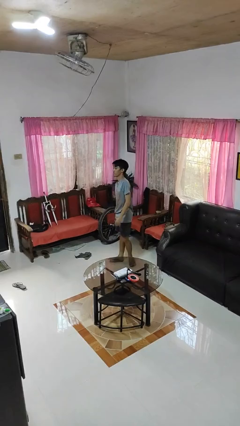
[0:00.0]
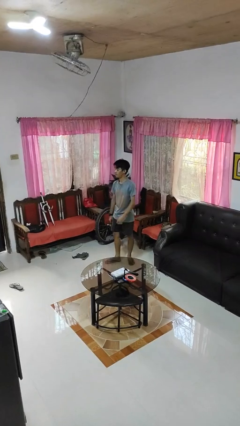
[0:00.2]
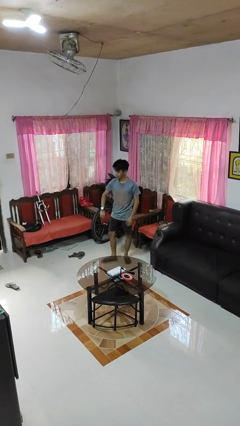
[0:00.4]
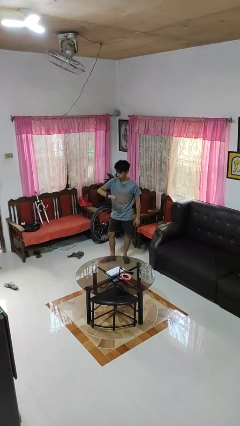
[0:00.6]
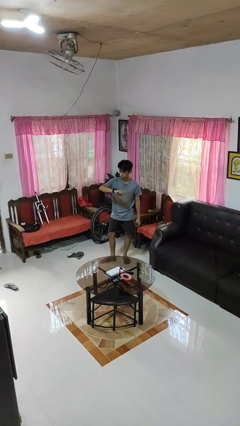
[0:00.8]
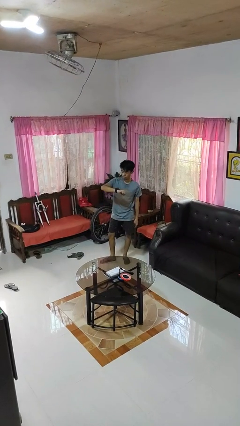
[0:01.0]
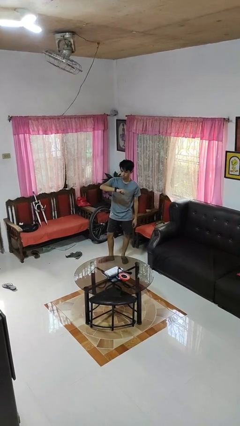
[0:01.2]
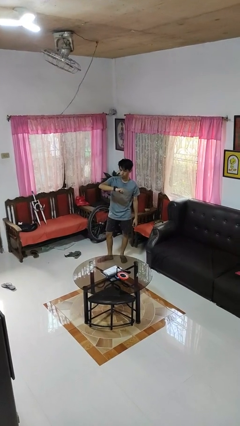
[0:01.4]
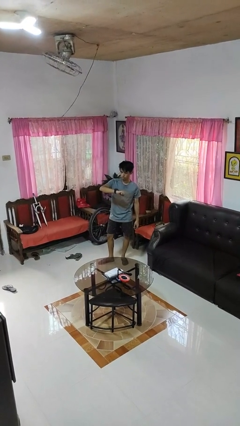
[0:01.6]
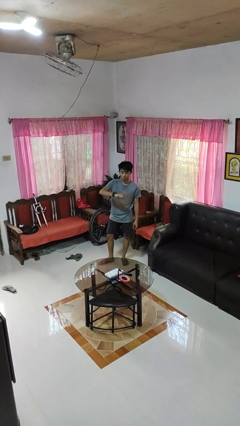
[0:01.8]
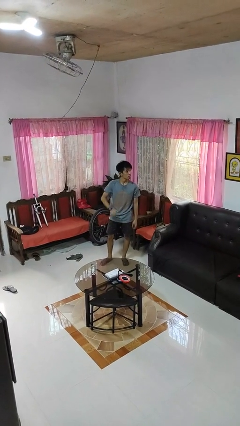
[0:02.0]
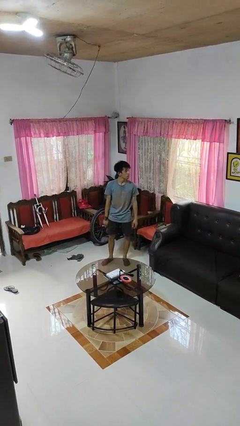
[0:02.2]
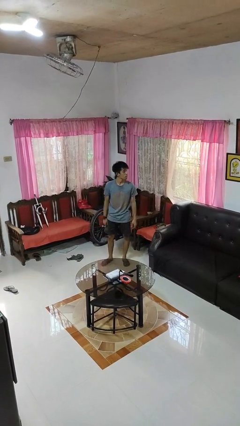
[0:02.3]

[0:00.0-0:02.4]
person looks at wristwatch

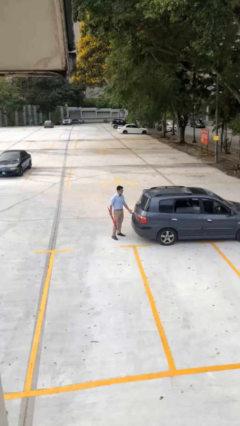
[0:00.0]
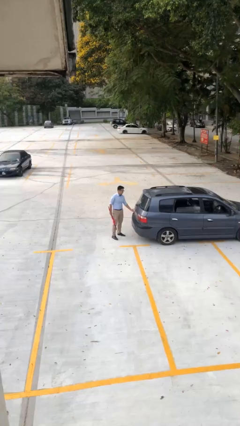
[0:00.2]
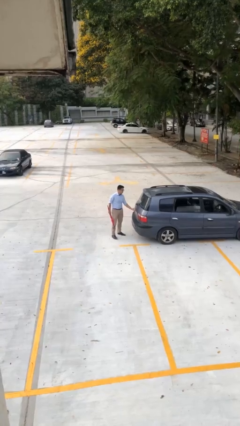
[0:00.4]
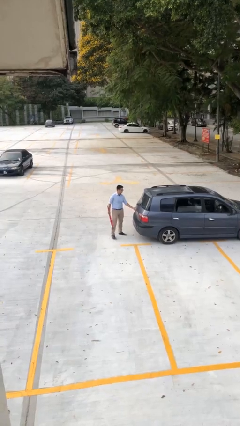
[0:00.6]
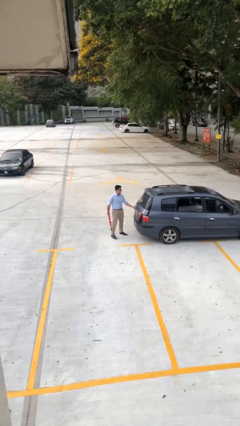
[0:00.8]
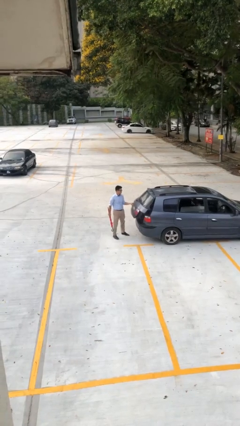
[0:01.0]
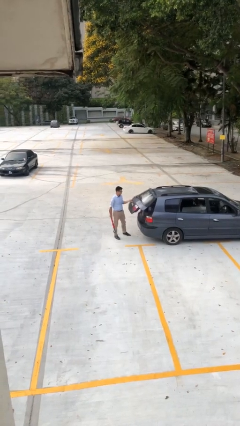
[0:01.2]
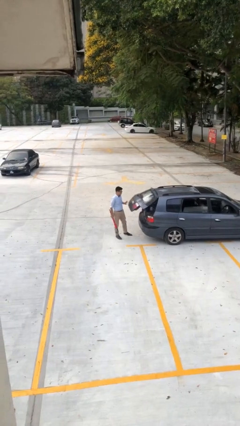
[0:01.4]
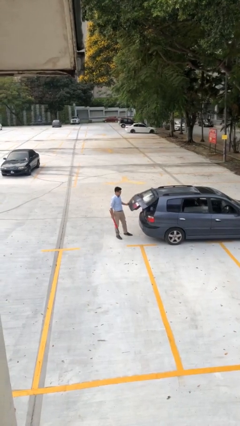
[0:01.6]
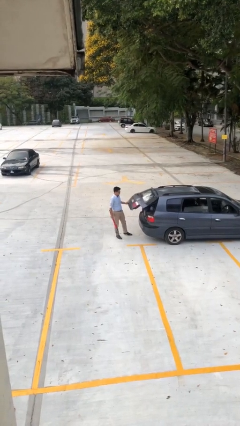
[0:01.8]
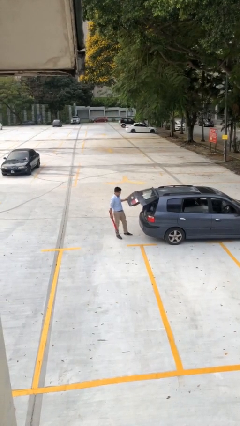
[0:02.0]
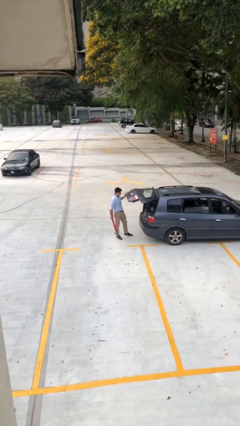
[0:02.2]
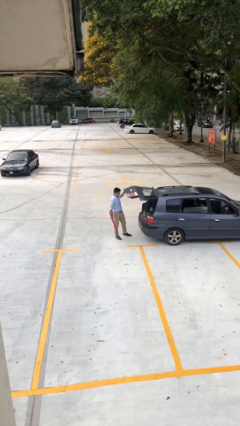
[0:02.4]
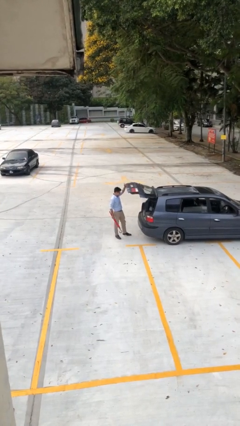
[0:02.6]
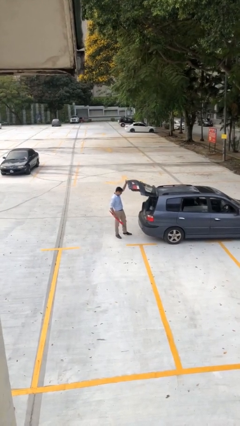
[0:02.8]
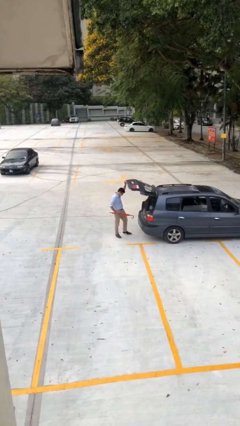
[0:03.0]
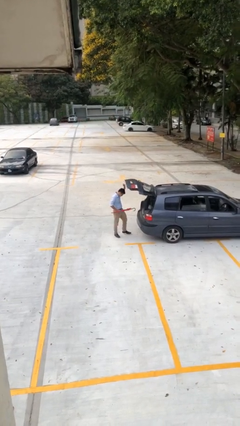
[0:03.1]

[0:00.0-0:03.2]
person opens car trunk

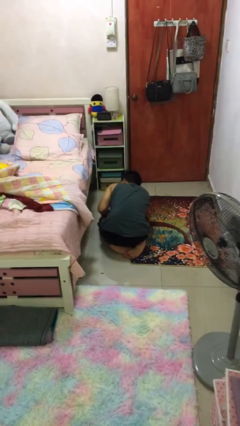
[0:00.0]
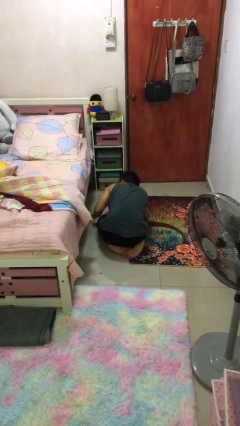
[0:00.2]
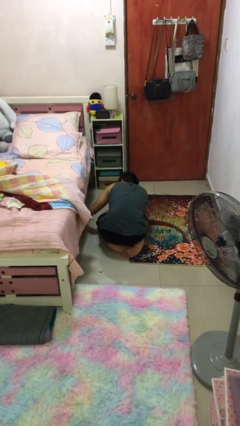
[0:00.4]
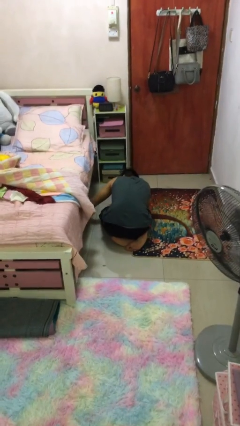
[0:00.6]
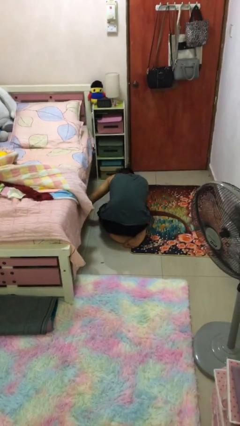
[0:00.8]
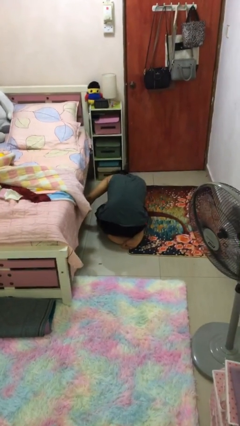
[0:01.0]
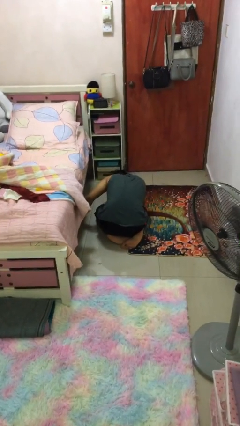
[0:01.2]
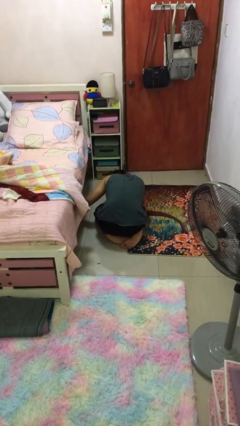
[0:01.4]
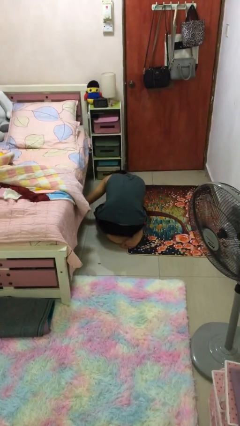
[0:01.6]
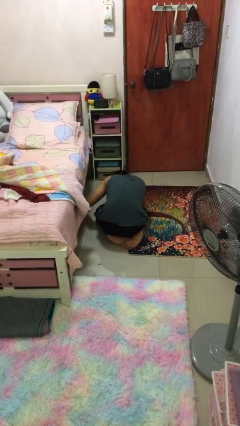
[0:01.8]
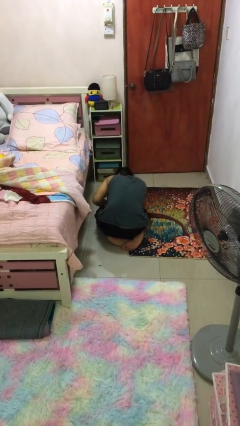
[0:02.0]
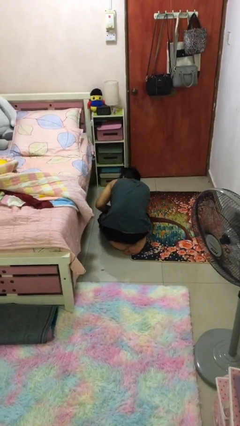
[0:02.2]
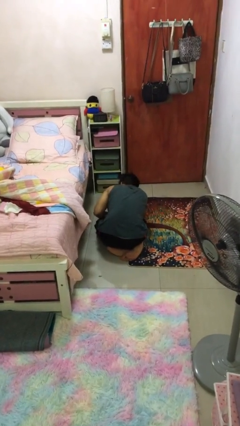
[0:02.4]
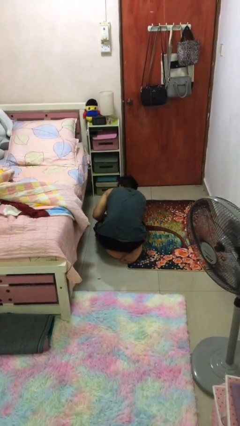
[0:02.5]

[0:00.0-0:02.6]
person searches under bed

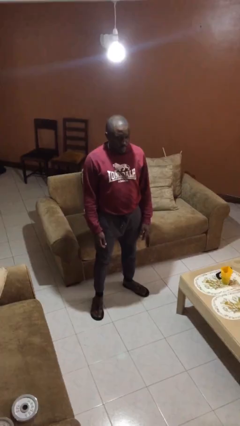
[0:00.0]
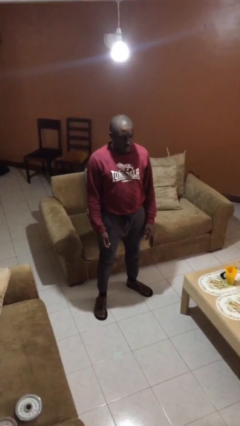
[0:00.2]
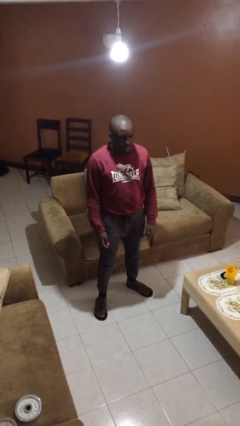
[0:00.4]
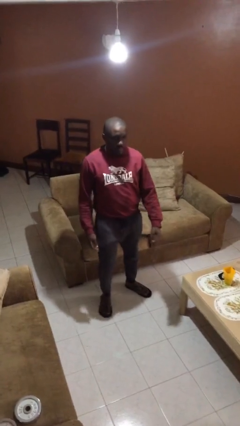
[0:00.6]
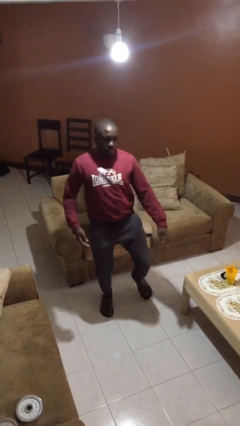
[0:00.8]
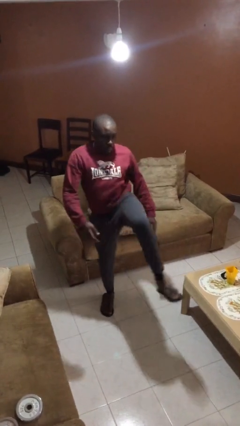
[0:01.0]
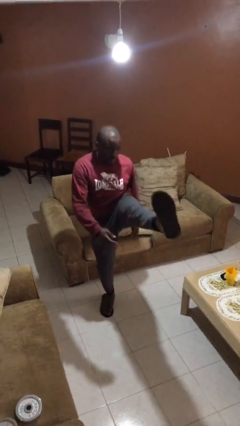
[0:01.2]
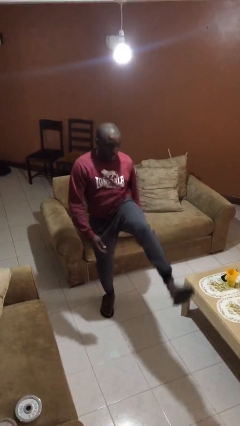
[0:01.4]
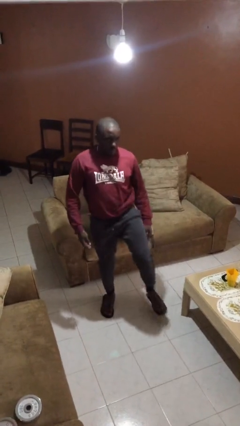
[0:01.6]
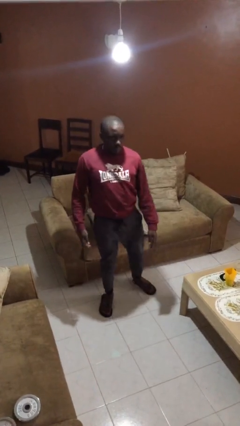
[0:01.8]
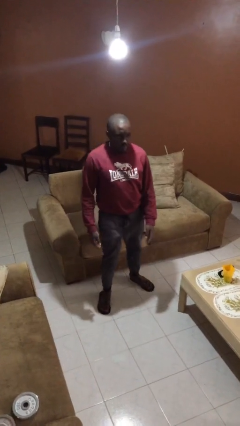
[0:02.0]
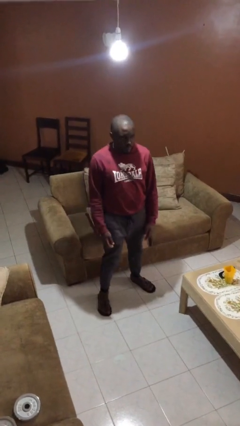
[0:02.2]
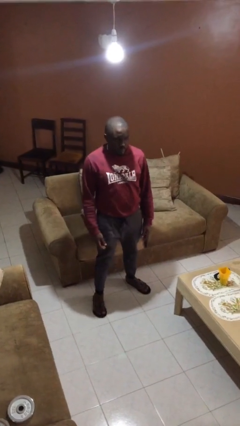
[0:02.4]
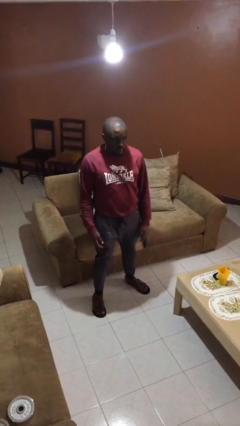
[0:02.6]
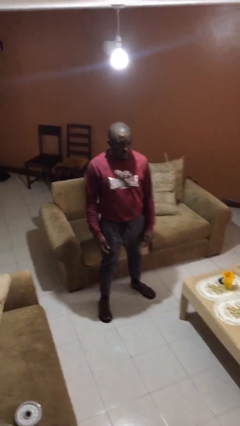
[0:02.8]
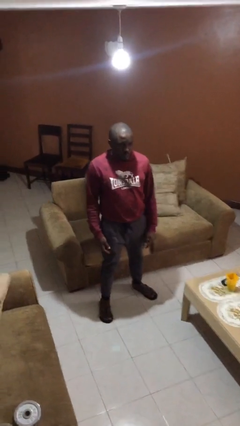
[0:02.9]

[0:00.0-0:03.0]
person karate kicks

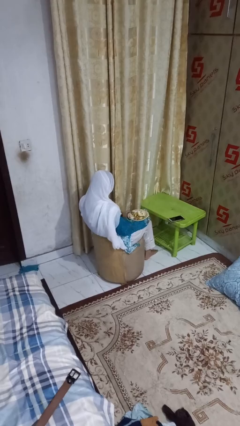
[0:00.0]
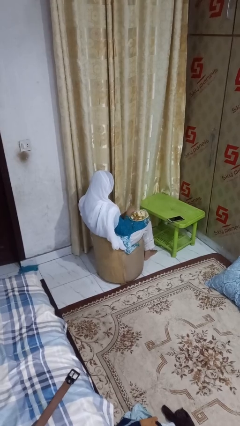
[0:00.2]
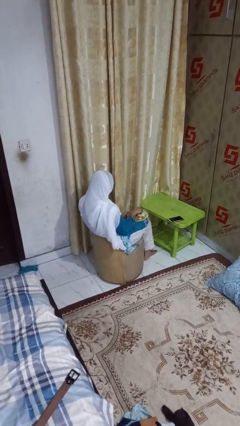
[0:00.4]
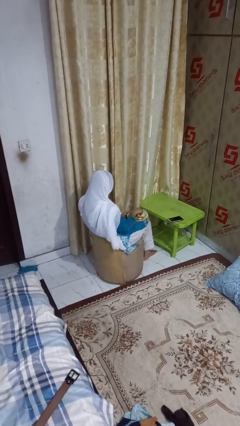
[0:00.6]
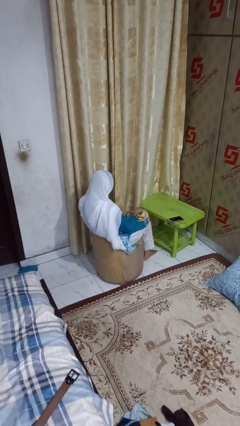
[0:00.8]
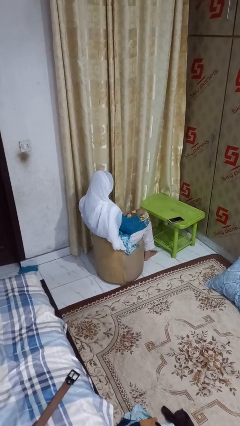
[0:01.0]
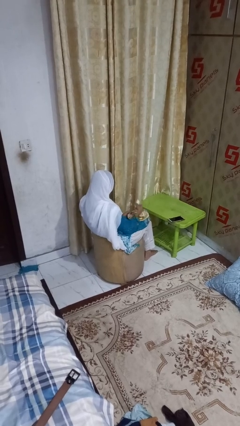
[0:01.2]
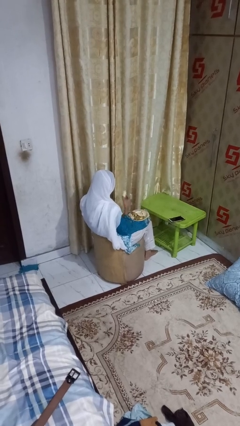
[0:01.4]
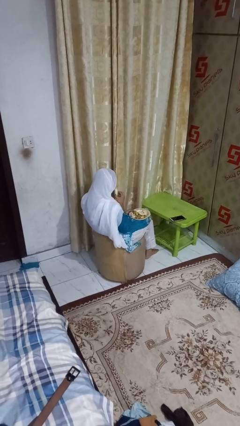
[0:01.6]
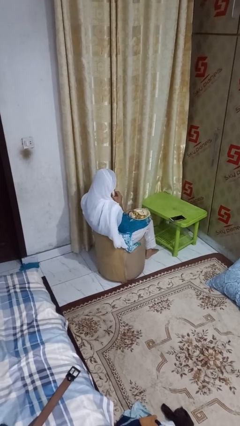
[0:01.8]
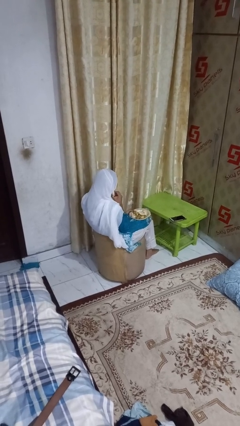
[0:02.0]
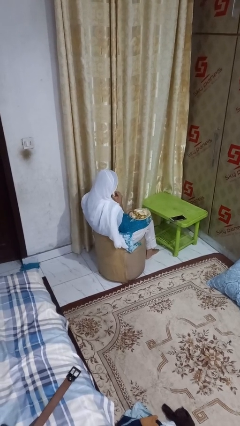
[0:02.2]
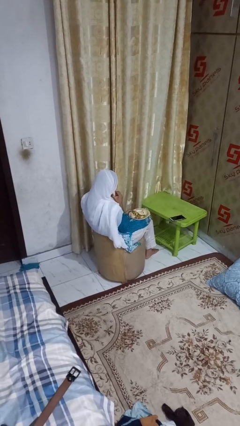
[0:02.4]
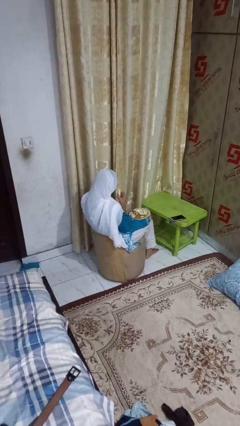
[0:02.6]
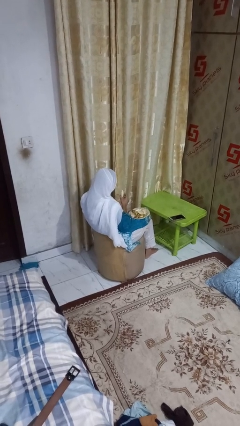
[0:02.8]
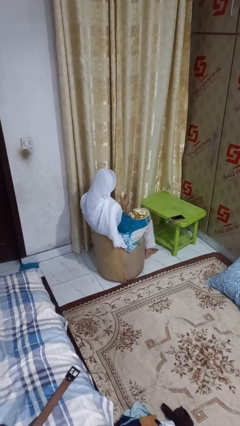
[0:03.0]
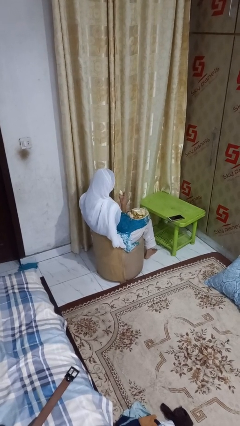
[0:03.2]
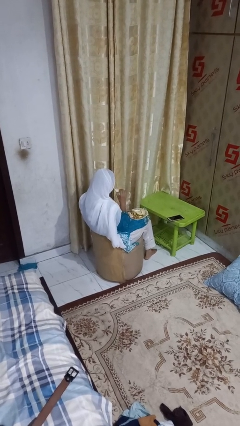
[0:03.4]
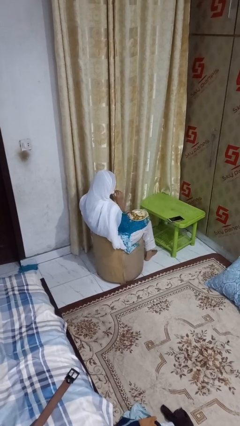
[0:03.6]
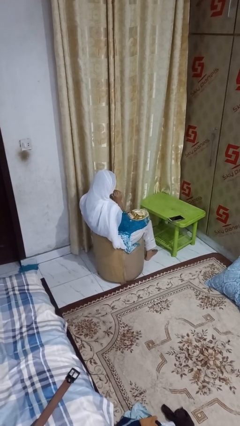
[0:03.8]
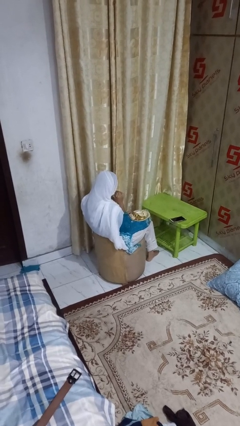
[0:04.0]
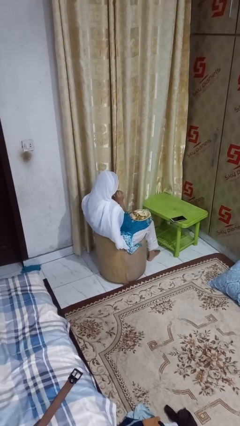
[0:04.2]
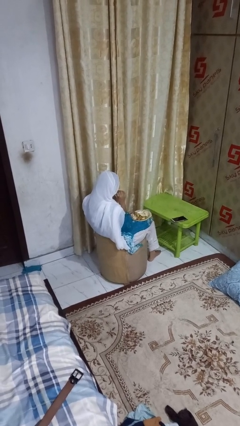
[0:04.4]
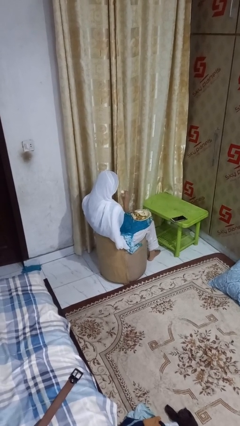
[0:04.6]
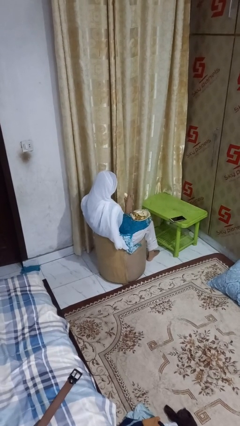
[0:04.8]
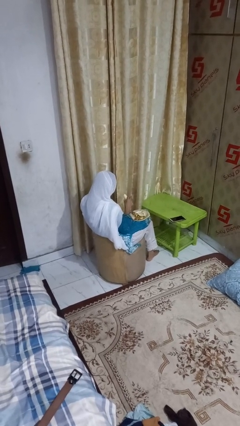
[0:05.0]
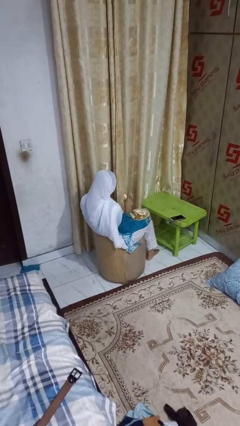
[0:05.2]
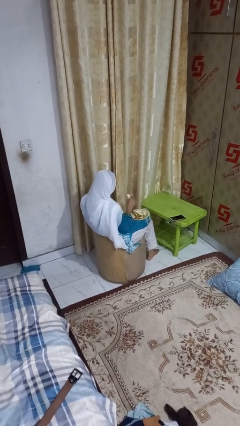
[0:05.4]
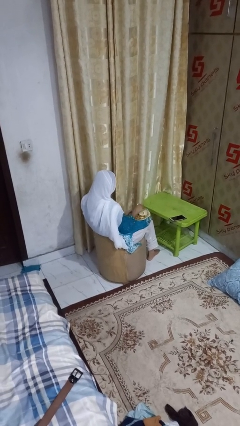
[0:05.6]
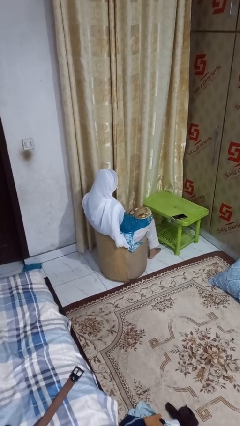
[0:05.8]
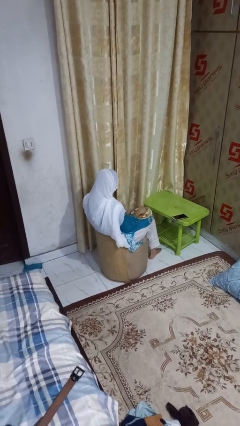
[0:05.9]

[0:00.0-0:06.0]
person eats with hands

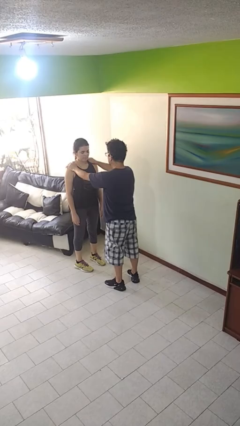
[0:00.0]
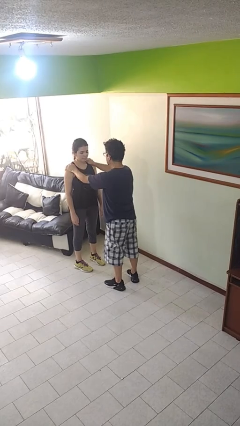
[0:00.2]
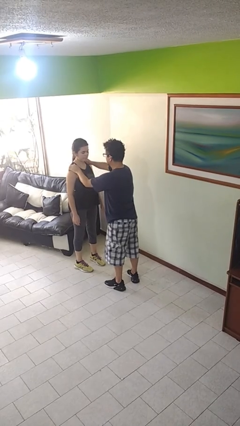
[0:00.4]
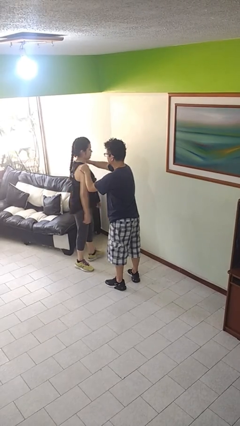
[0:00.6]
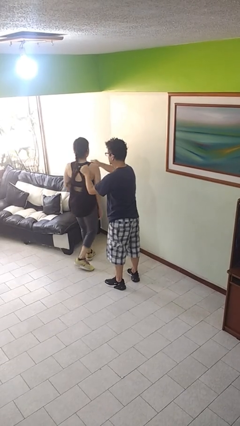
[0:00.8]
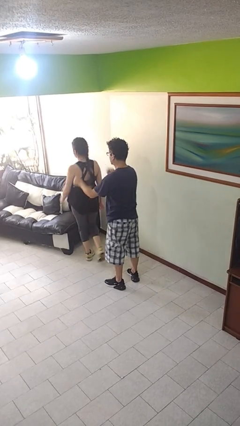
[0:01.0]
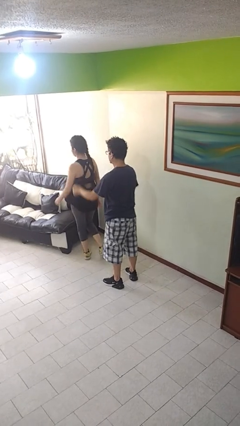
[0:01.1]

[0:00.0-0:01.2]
person spins person around
